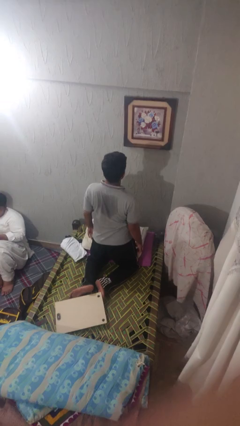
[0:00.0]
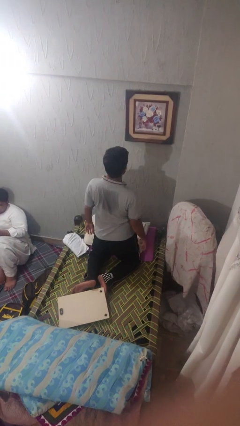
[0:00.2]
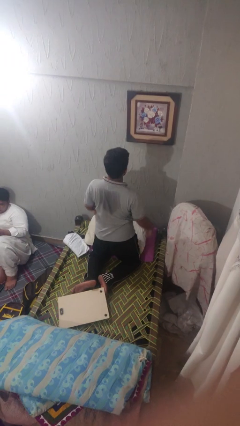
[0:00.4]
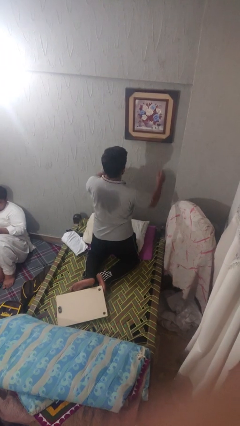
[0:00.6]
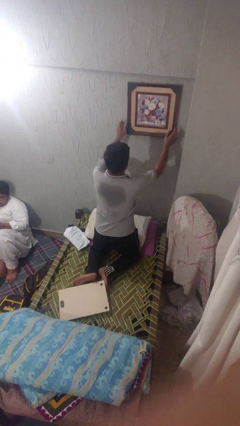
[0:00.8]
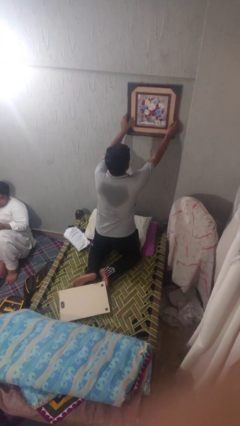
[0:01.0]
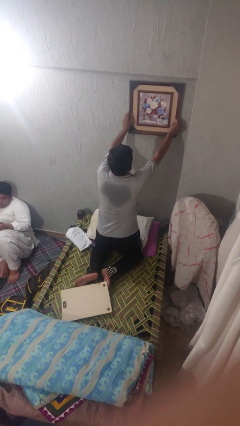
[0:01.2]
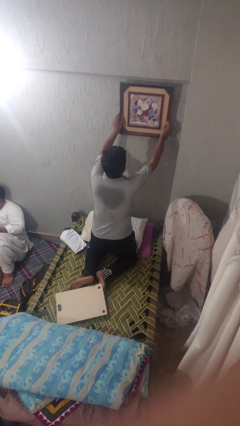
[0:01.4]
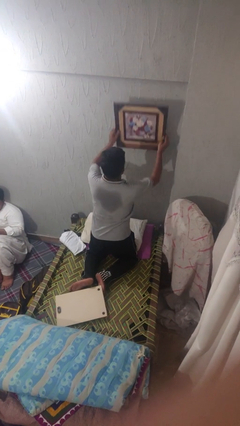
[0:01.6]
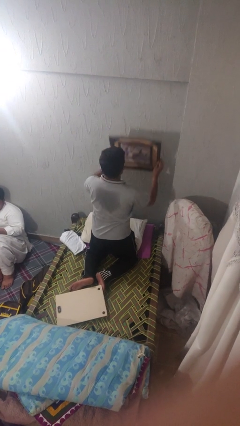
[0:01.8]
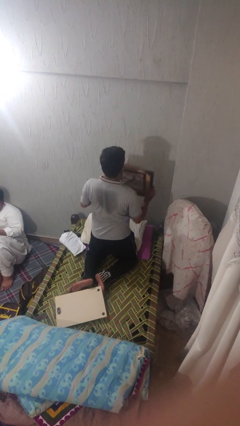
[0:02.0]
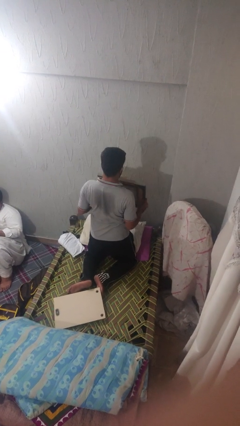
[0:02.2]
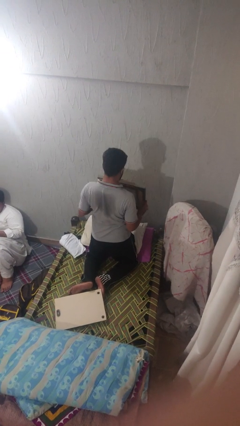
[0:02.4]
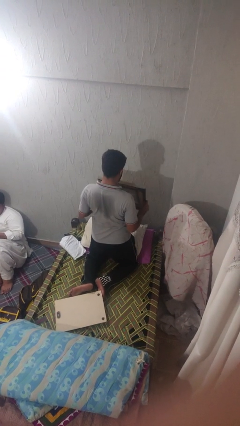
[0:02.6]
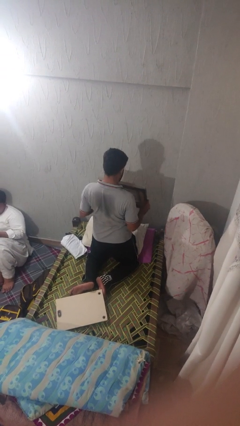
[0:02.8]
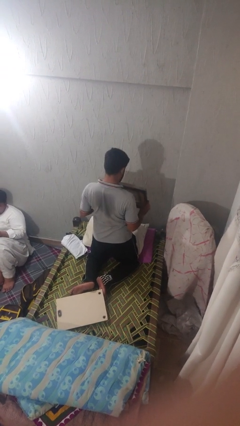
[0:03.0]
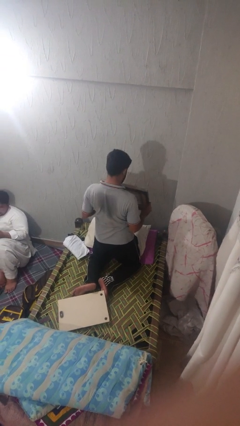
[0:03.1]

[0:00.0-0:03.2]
person takes down picture frame

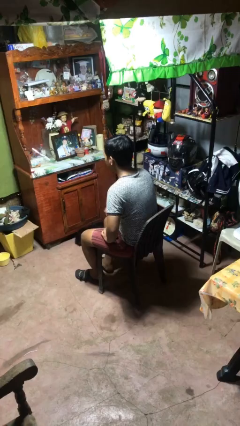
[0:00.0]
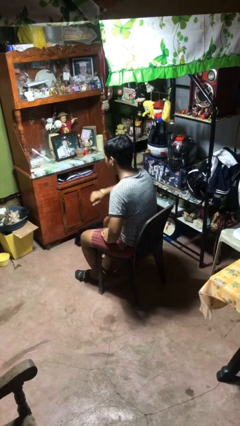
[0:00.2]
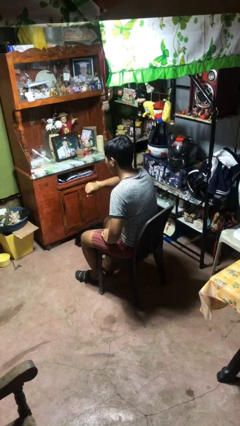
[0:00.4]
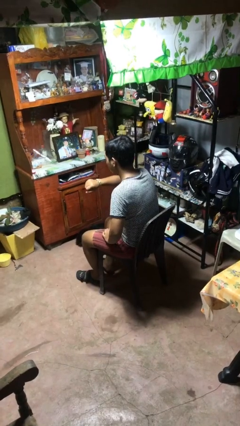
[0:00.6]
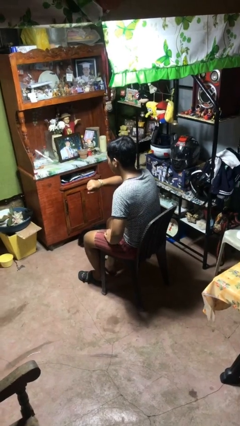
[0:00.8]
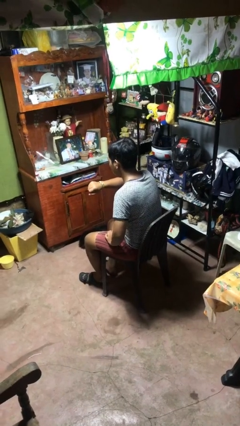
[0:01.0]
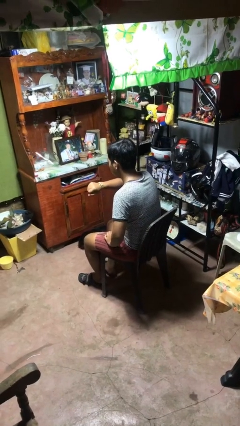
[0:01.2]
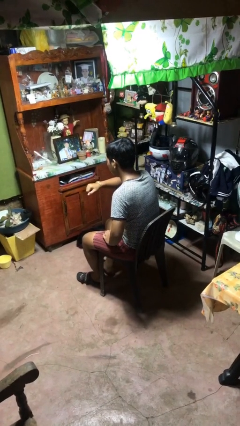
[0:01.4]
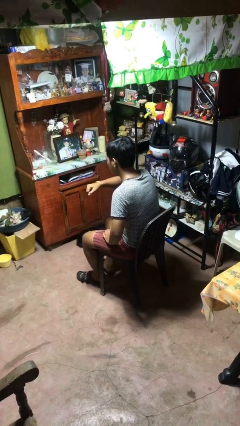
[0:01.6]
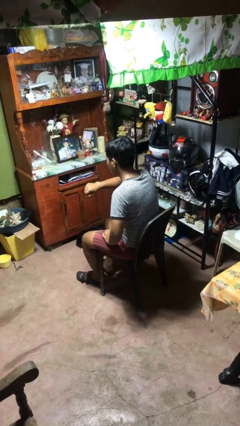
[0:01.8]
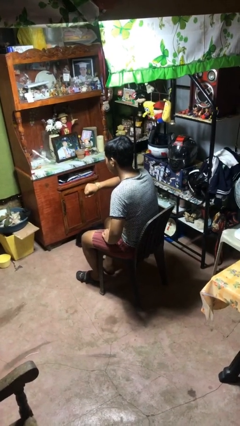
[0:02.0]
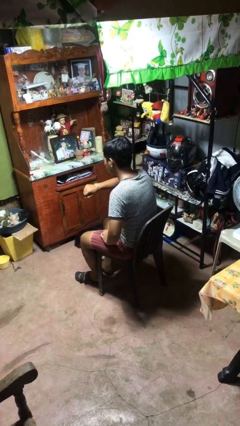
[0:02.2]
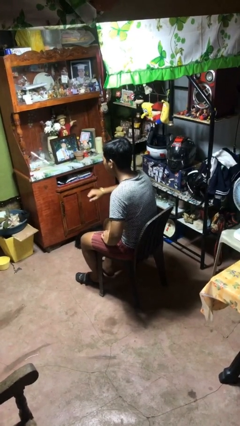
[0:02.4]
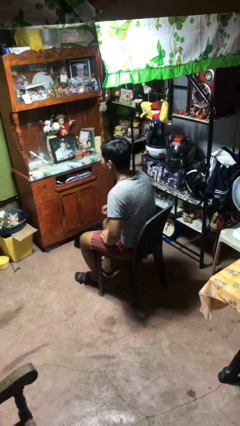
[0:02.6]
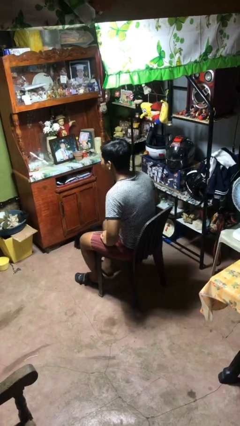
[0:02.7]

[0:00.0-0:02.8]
person looks at wristwatch

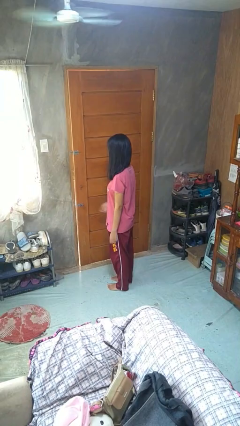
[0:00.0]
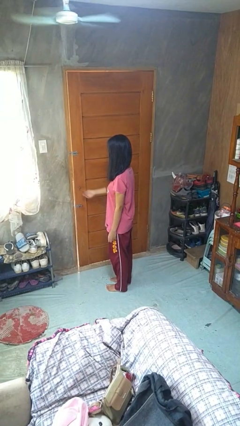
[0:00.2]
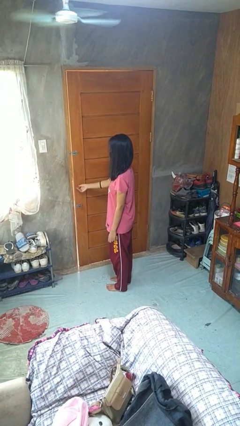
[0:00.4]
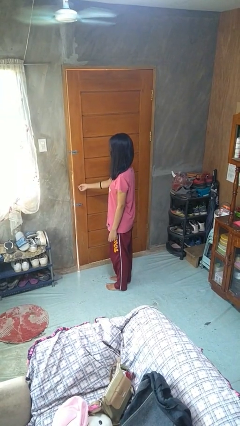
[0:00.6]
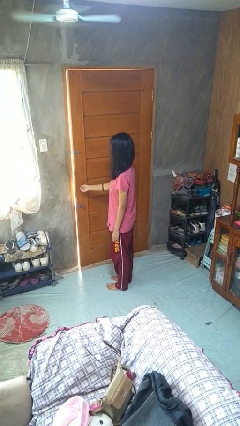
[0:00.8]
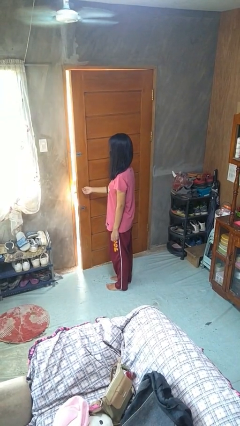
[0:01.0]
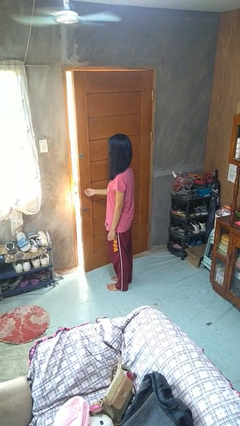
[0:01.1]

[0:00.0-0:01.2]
person opens facility door

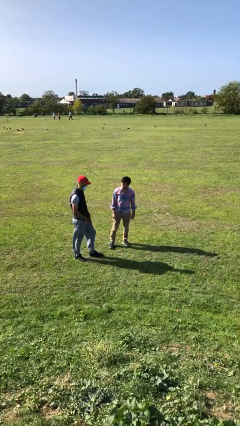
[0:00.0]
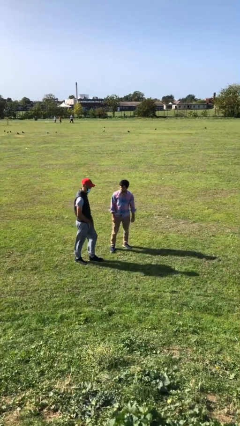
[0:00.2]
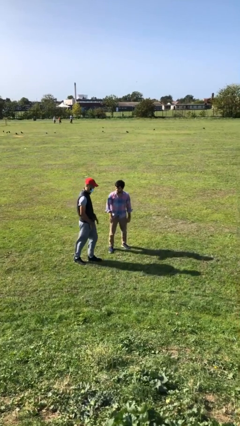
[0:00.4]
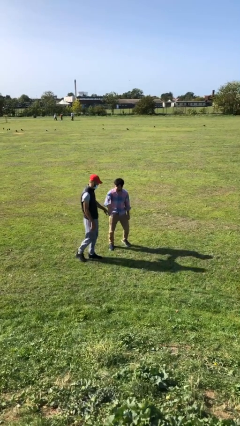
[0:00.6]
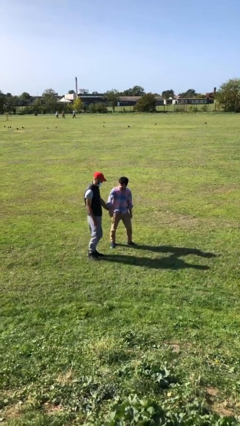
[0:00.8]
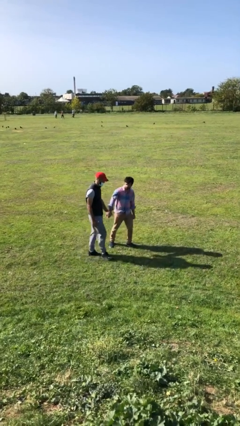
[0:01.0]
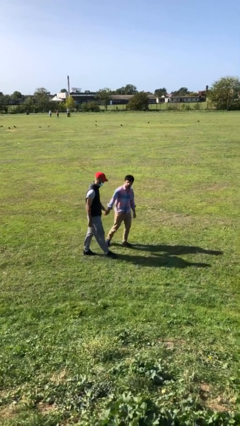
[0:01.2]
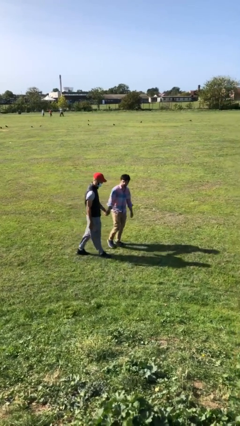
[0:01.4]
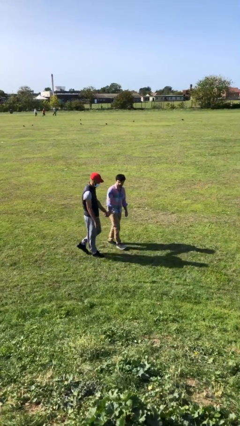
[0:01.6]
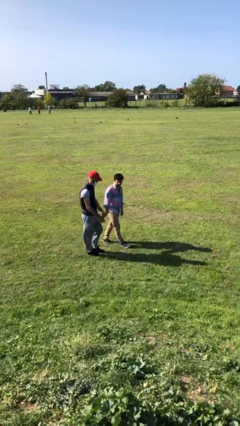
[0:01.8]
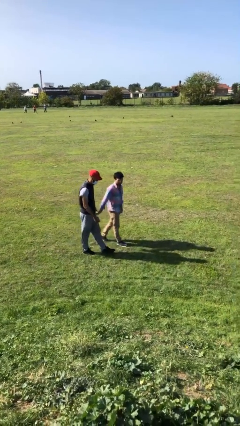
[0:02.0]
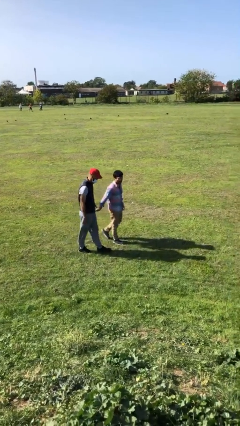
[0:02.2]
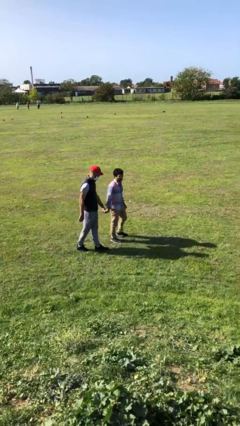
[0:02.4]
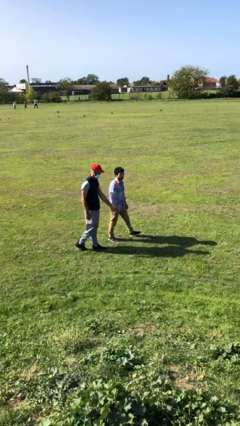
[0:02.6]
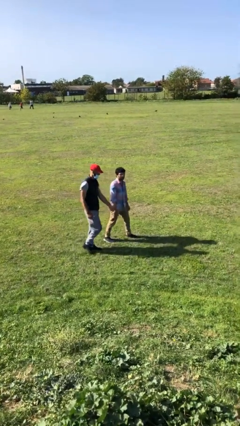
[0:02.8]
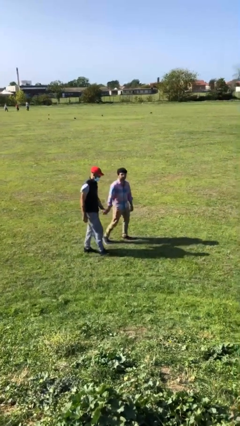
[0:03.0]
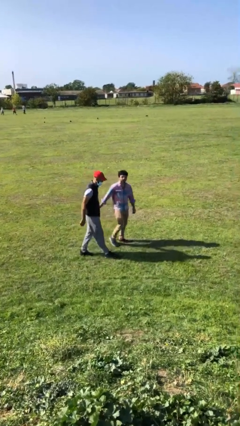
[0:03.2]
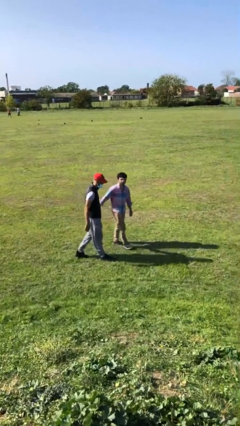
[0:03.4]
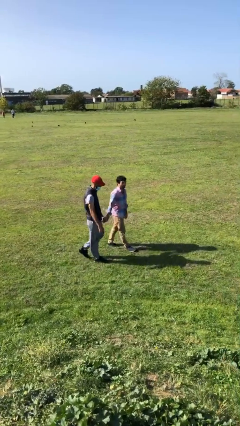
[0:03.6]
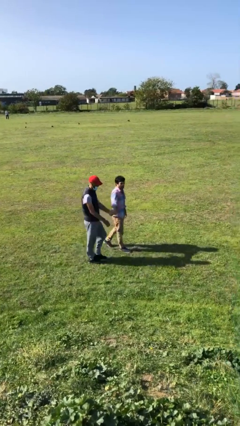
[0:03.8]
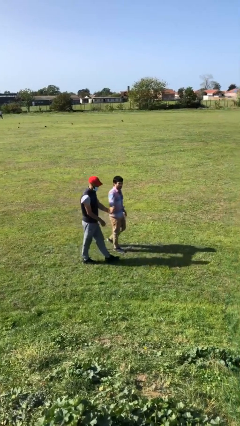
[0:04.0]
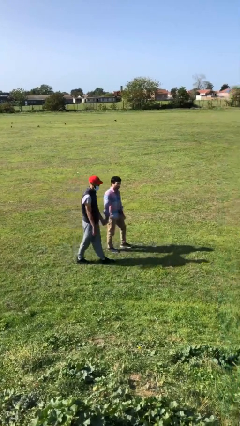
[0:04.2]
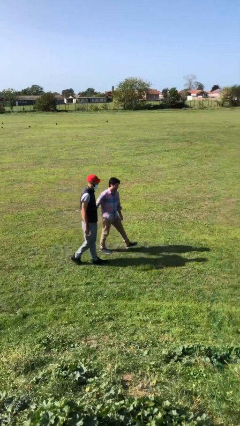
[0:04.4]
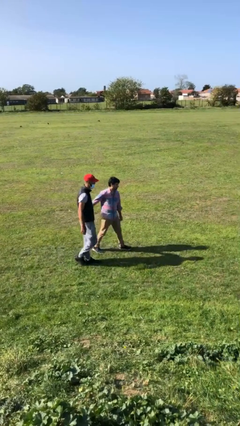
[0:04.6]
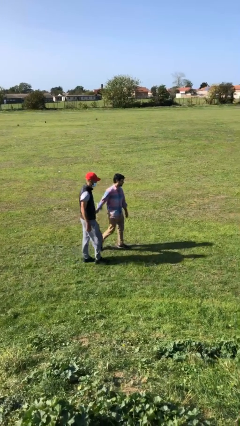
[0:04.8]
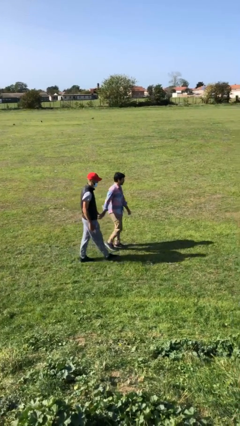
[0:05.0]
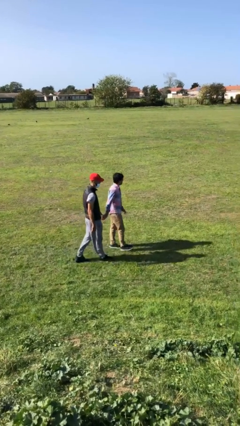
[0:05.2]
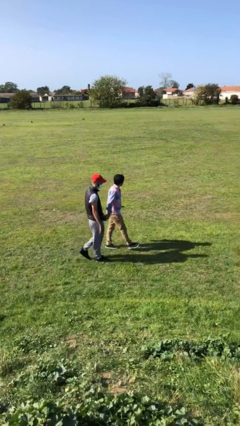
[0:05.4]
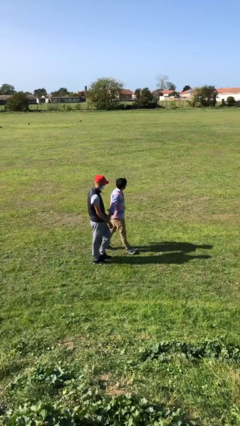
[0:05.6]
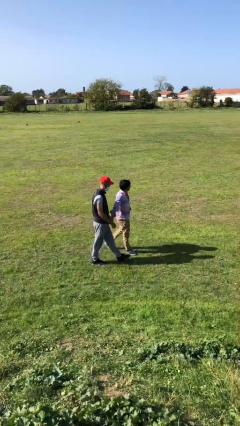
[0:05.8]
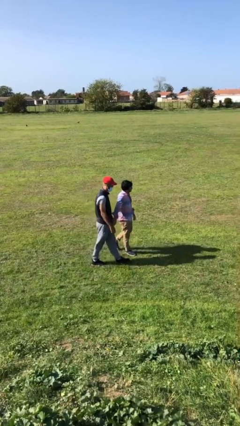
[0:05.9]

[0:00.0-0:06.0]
person holds hand

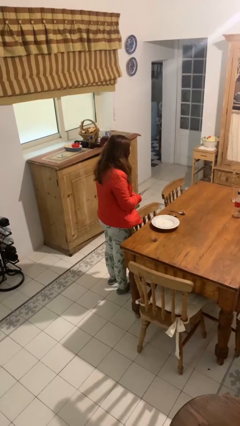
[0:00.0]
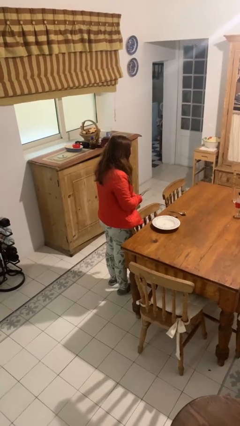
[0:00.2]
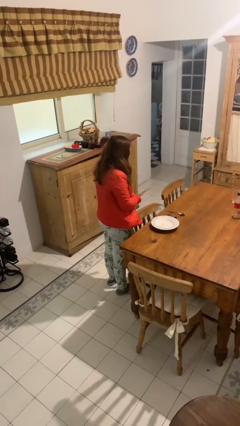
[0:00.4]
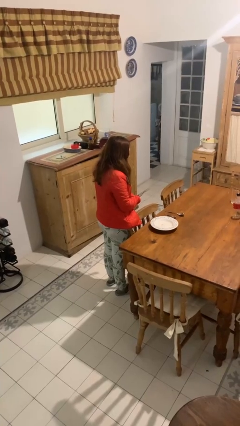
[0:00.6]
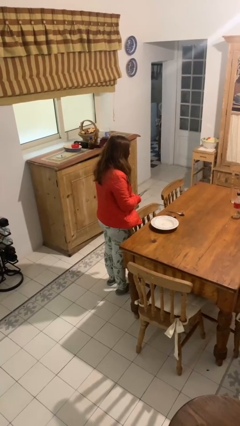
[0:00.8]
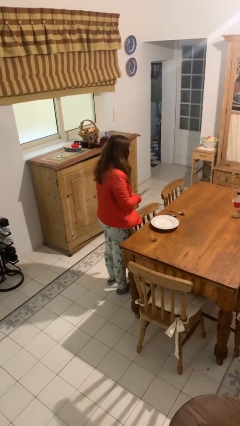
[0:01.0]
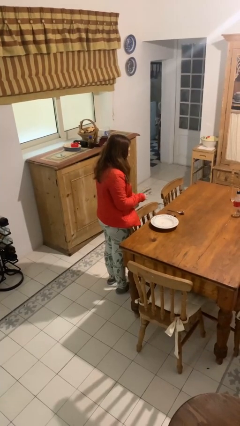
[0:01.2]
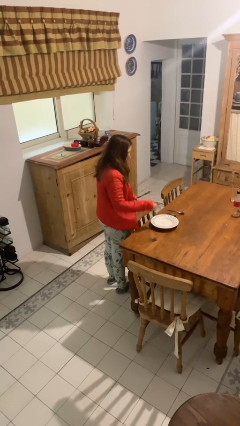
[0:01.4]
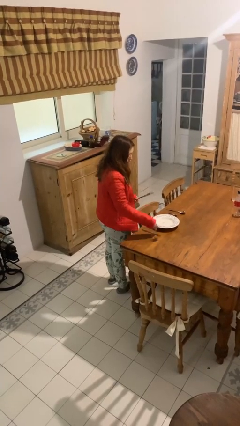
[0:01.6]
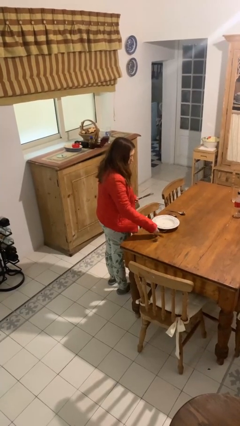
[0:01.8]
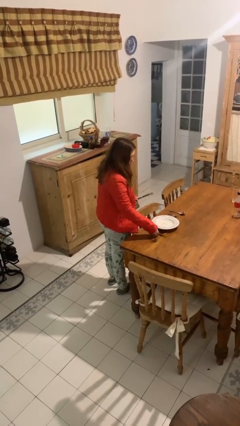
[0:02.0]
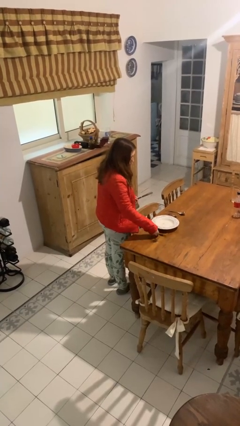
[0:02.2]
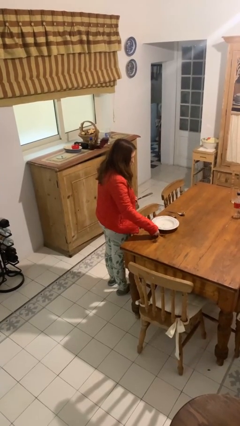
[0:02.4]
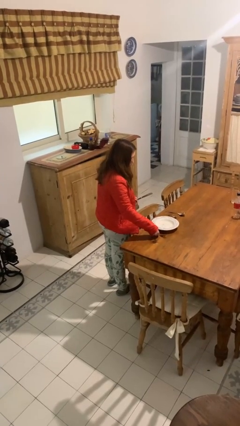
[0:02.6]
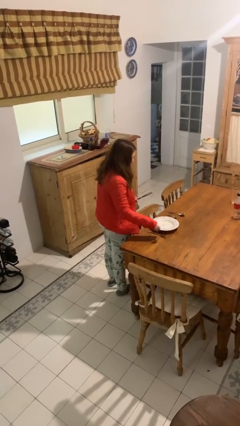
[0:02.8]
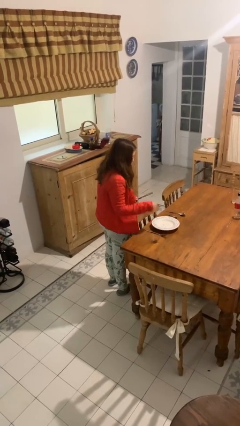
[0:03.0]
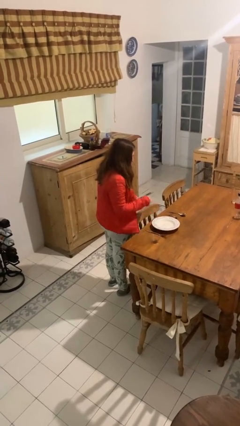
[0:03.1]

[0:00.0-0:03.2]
person sets table

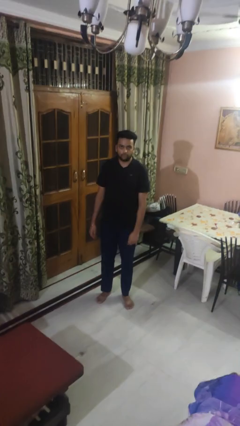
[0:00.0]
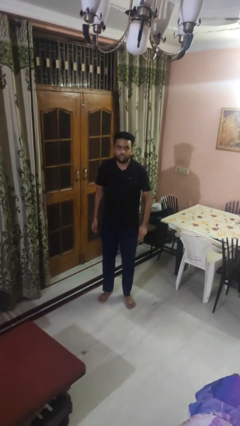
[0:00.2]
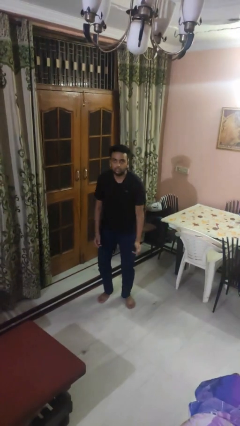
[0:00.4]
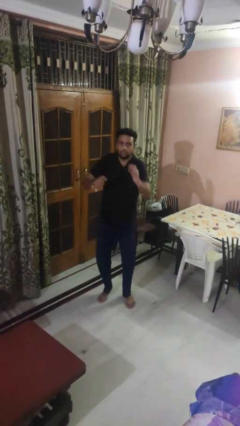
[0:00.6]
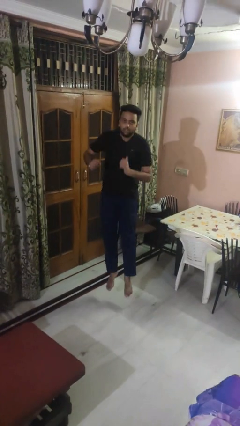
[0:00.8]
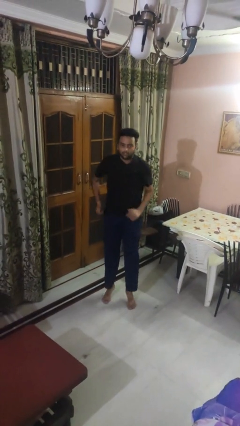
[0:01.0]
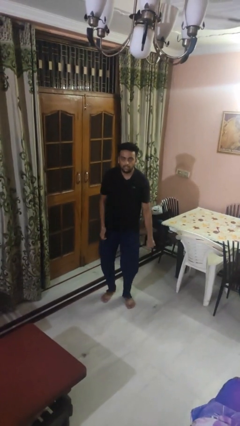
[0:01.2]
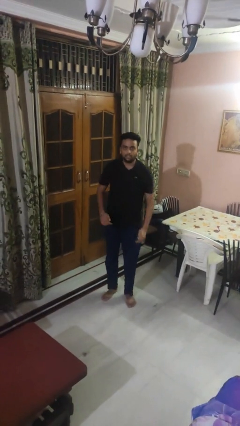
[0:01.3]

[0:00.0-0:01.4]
person jumps
